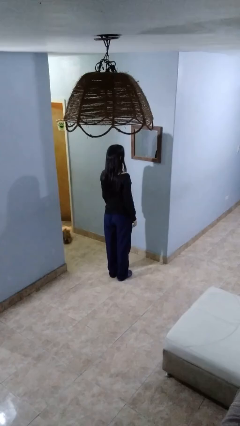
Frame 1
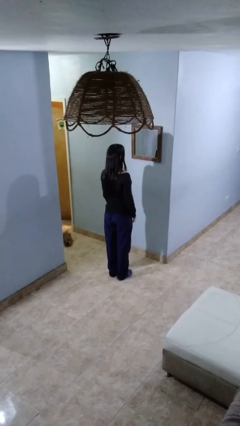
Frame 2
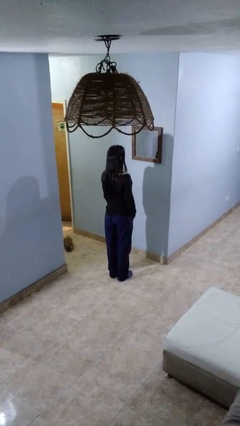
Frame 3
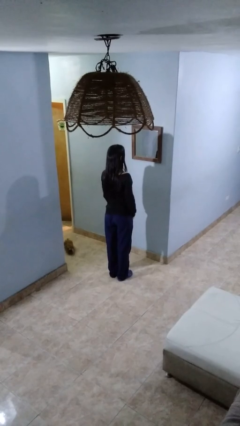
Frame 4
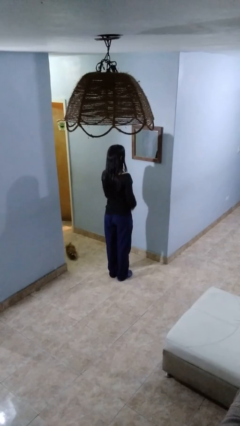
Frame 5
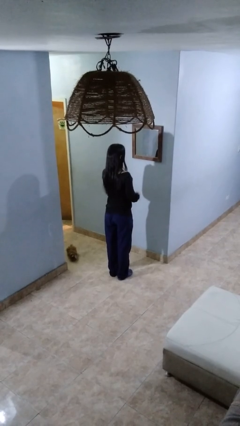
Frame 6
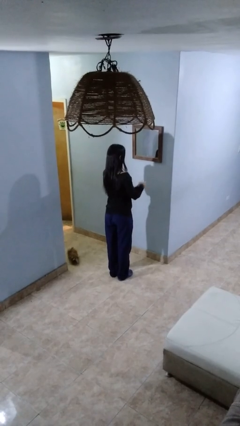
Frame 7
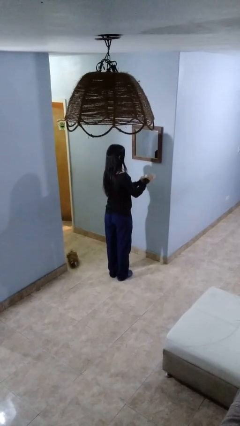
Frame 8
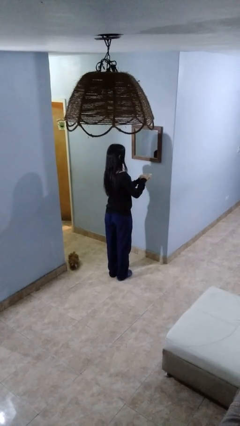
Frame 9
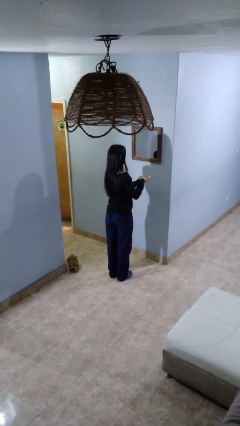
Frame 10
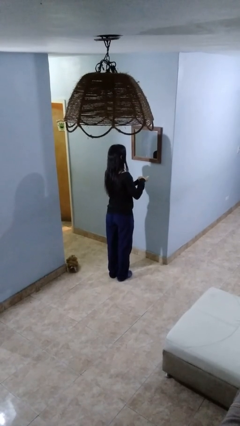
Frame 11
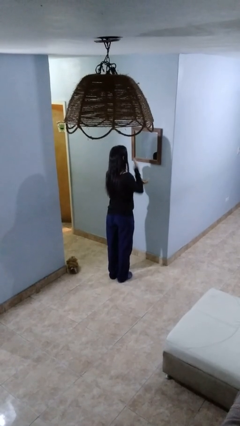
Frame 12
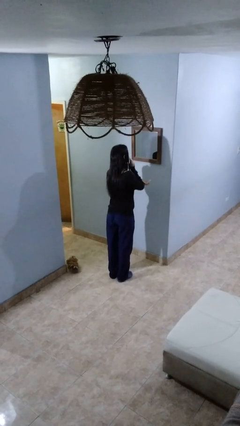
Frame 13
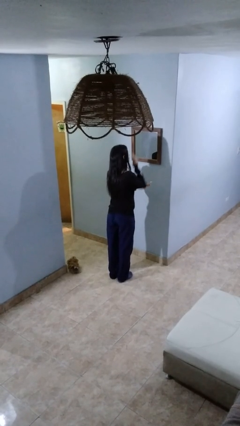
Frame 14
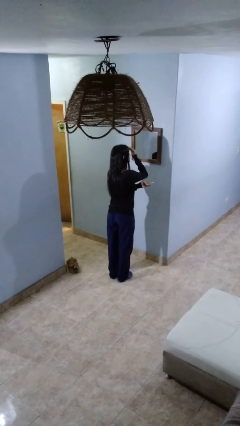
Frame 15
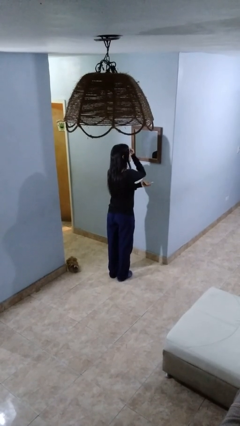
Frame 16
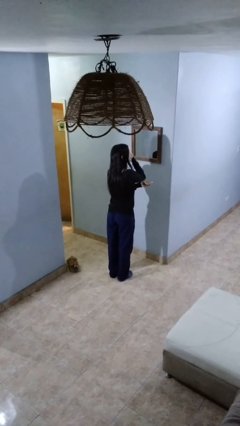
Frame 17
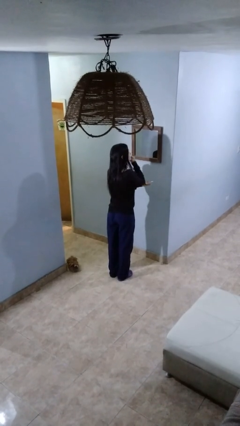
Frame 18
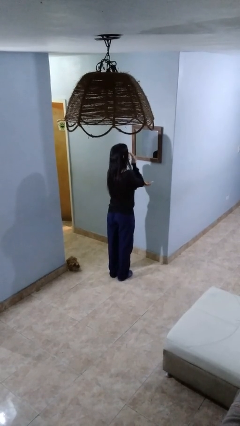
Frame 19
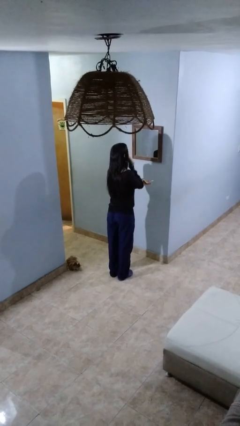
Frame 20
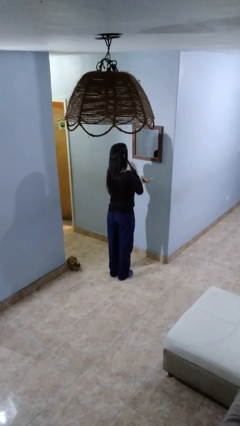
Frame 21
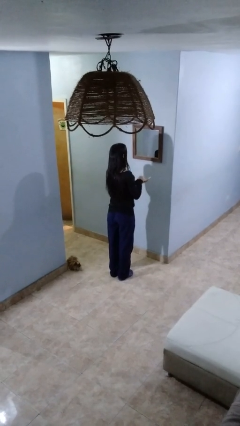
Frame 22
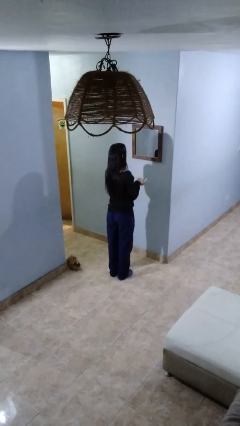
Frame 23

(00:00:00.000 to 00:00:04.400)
person applies foundation makeup

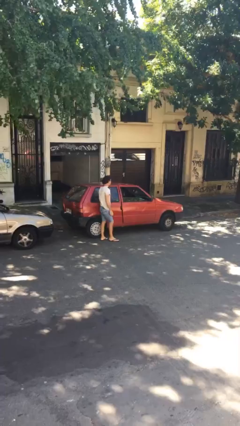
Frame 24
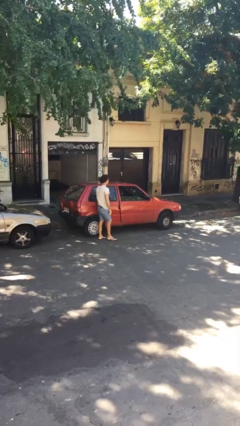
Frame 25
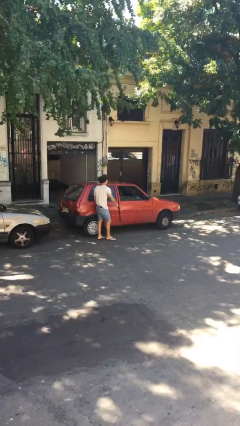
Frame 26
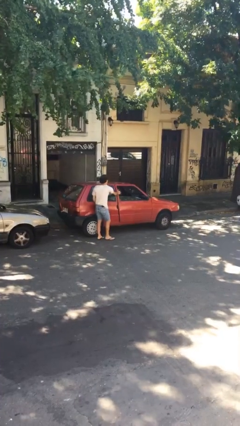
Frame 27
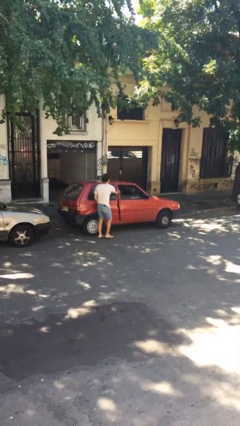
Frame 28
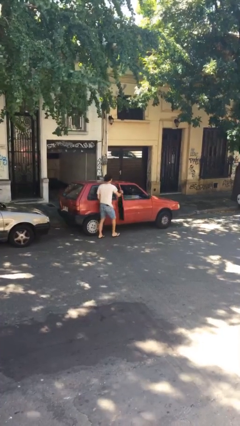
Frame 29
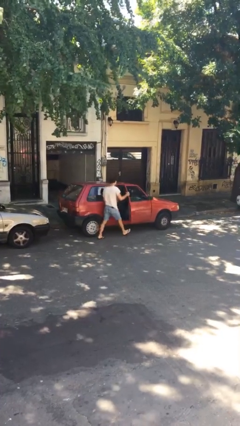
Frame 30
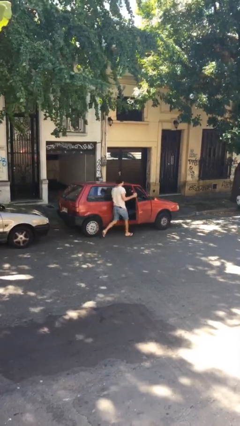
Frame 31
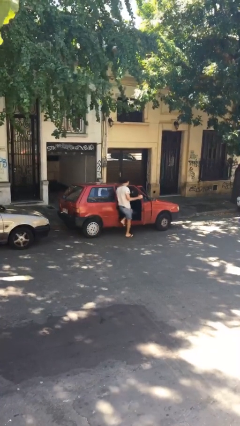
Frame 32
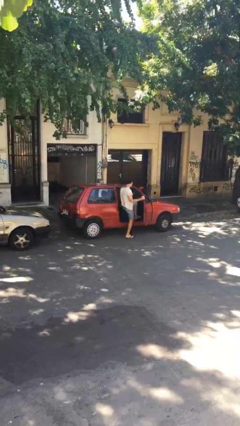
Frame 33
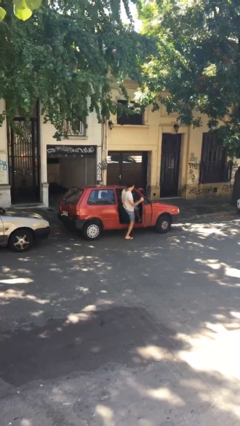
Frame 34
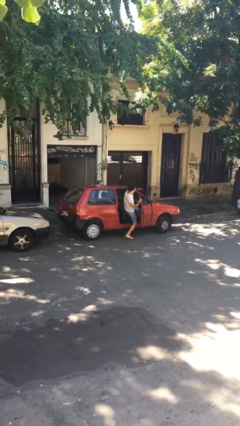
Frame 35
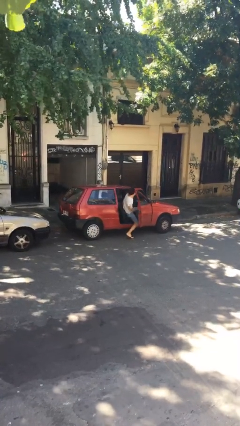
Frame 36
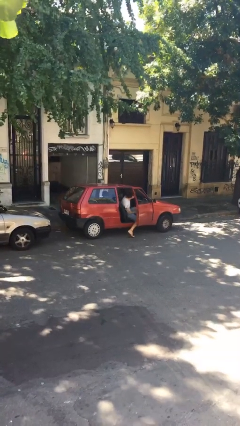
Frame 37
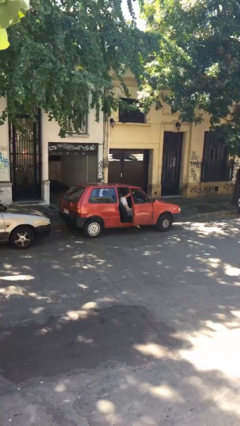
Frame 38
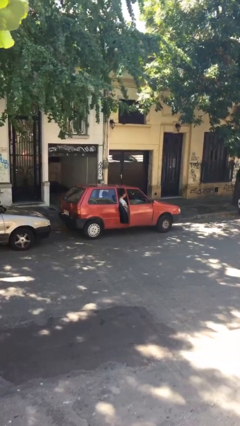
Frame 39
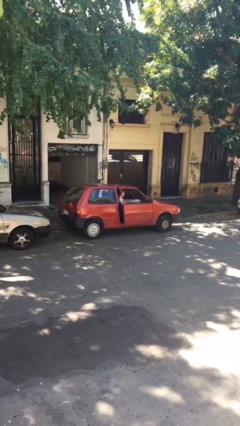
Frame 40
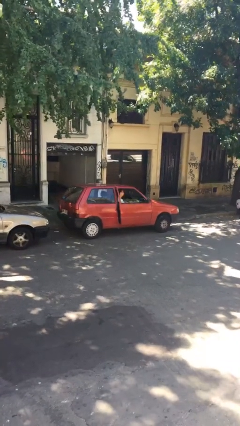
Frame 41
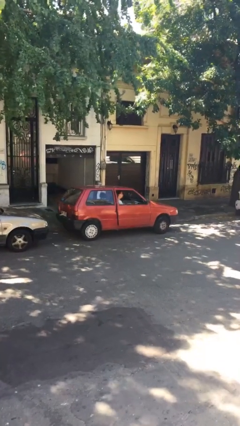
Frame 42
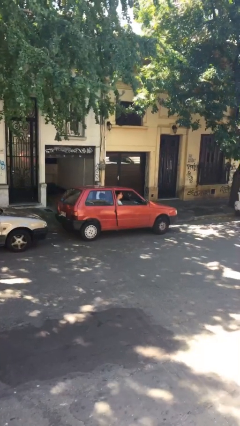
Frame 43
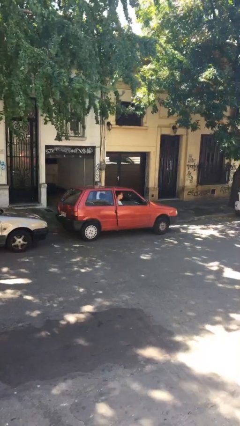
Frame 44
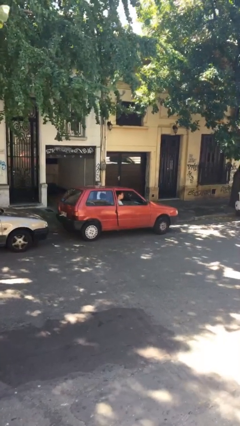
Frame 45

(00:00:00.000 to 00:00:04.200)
car picks up person

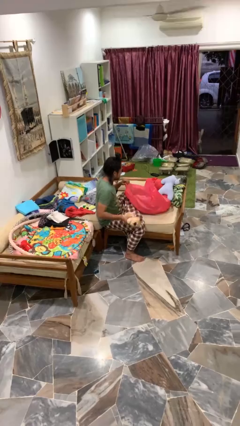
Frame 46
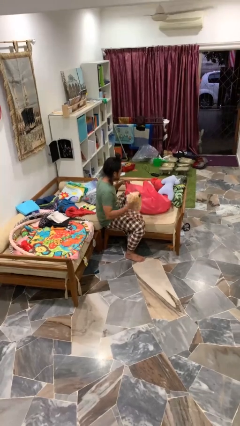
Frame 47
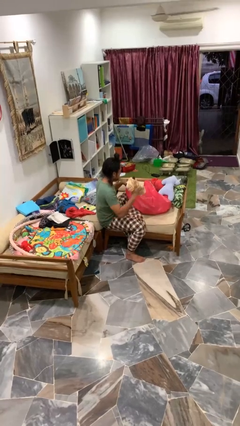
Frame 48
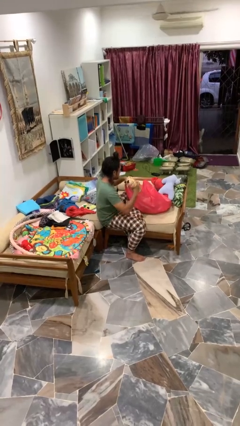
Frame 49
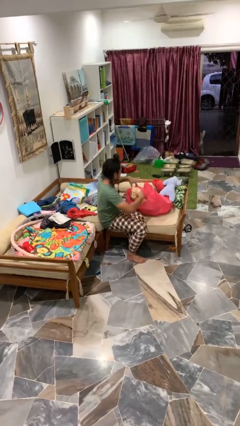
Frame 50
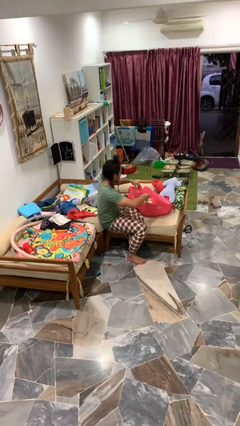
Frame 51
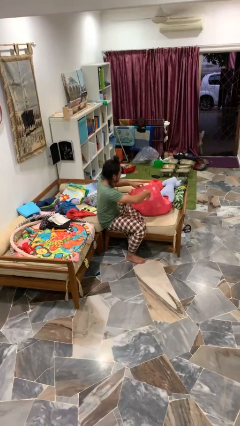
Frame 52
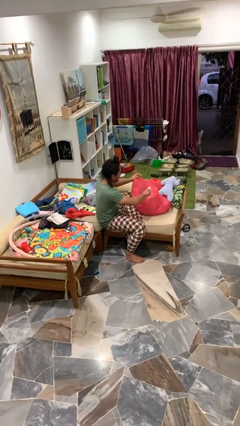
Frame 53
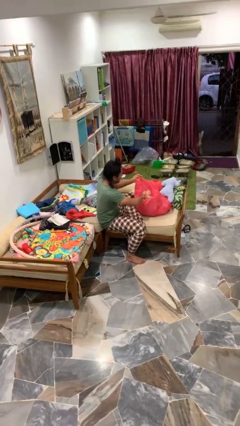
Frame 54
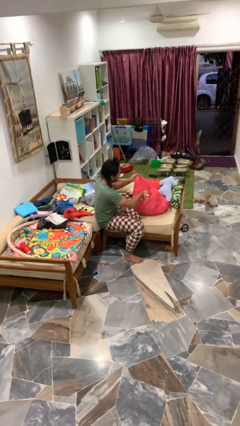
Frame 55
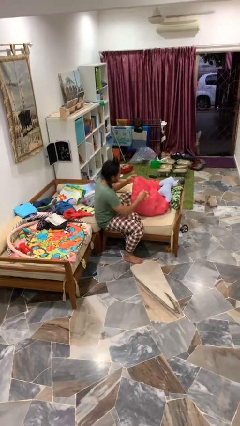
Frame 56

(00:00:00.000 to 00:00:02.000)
person puts object into bag

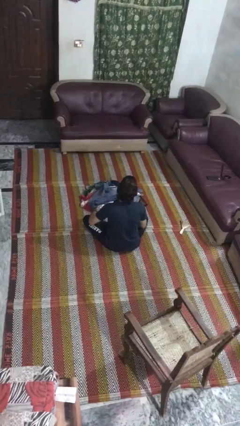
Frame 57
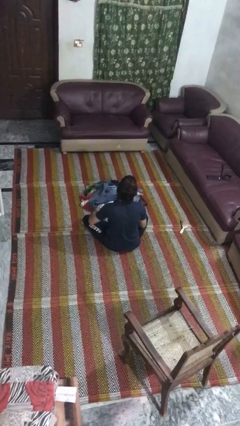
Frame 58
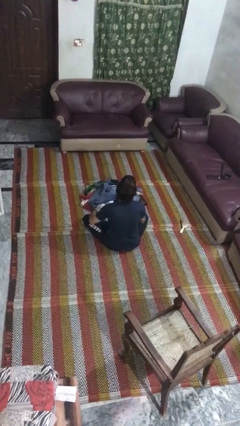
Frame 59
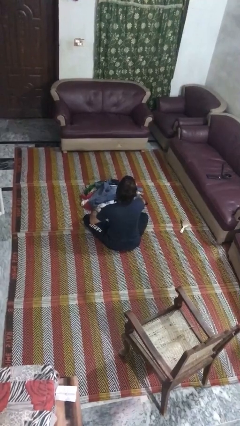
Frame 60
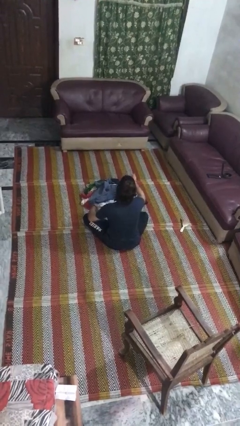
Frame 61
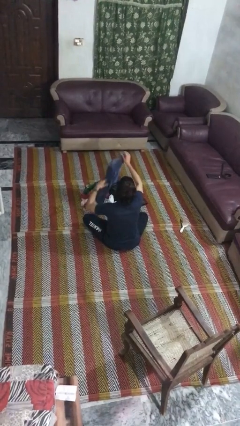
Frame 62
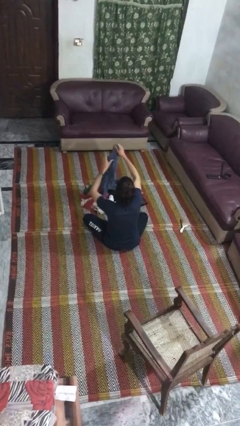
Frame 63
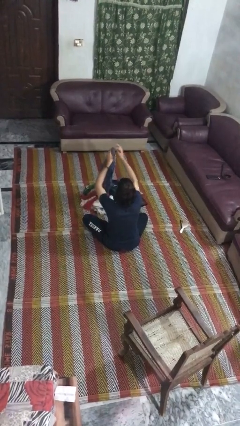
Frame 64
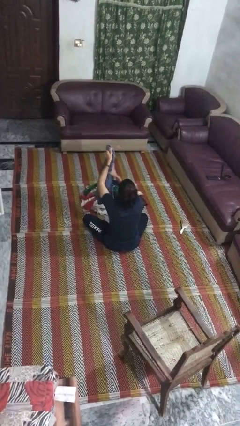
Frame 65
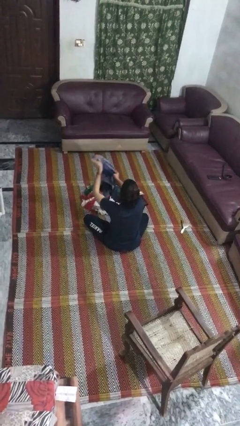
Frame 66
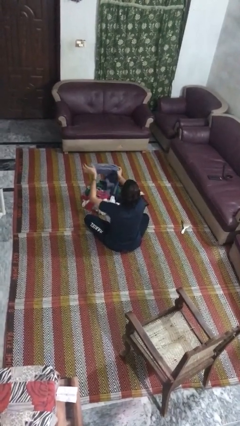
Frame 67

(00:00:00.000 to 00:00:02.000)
person folds shirt

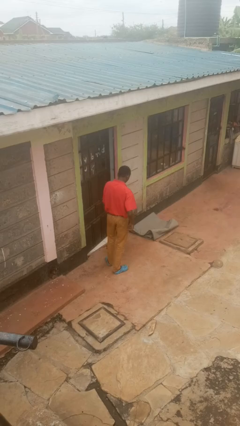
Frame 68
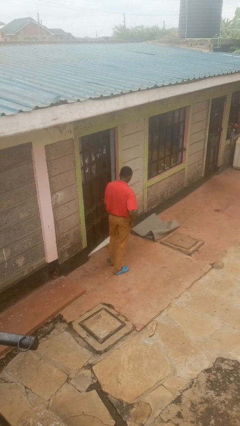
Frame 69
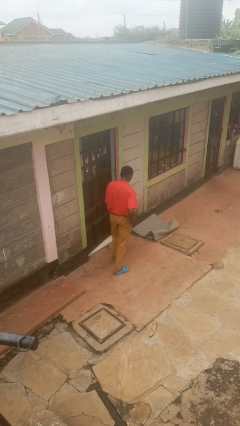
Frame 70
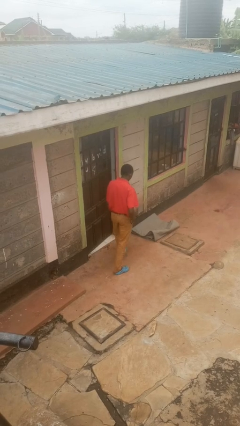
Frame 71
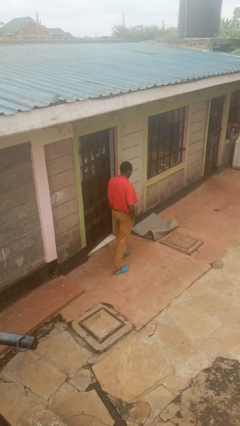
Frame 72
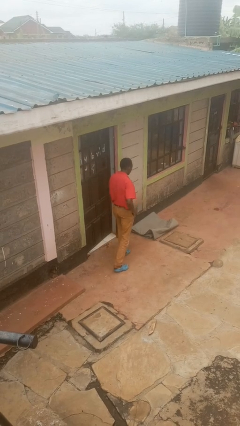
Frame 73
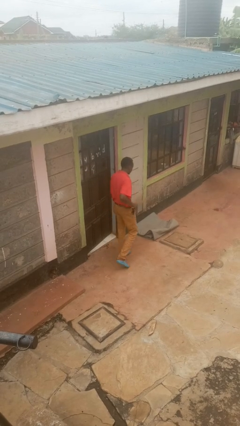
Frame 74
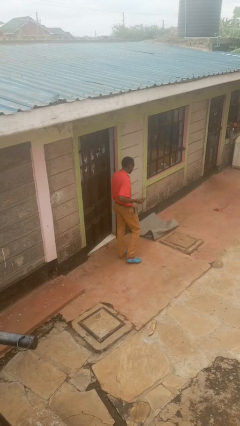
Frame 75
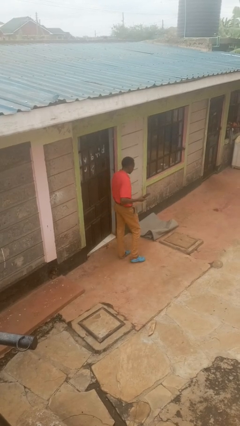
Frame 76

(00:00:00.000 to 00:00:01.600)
person takes phone from pocket

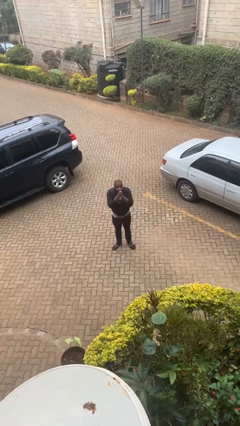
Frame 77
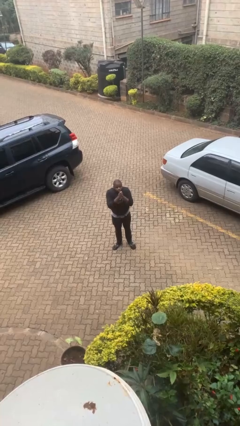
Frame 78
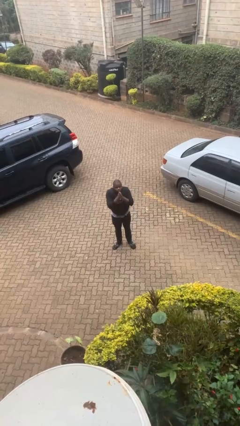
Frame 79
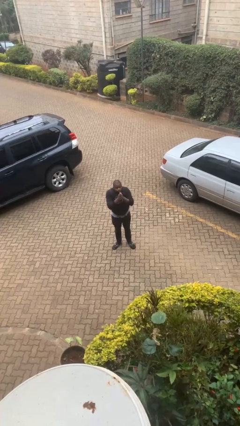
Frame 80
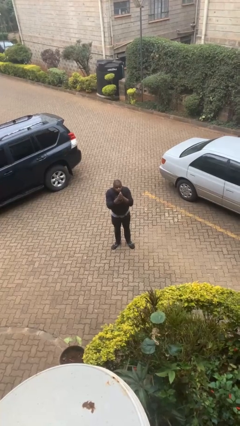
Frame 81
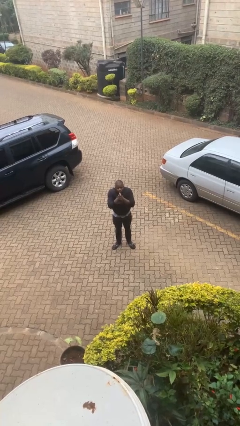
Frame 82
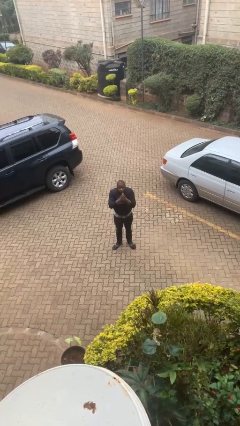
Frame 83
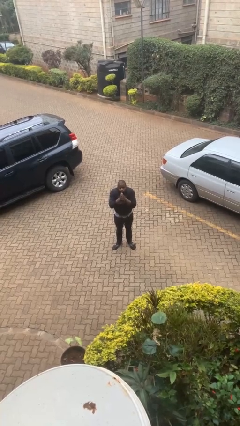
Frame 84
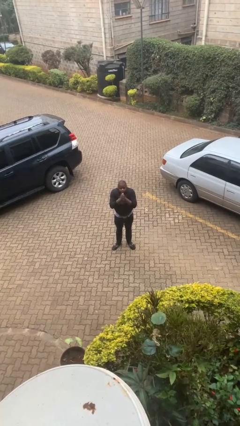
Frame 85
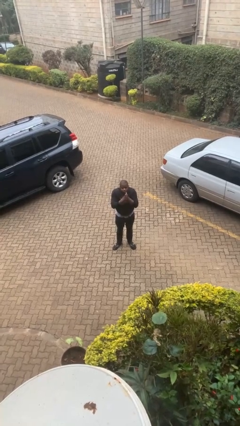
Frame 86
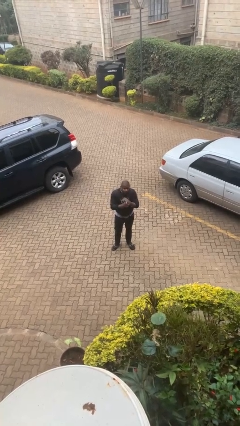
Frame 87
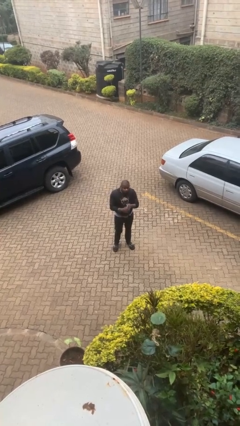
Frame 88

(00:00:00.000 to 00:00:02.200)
person blows into hands

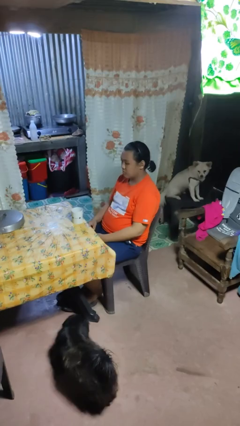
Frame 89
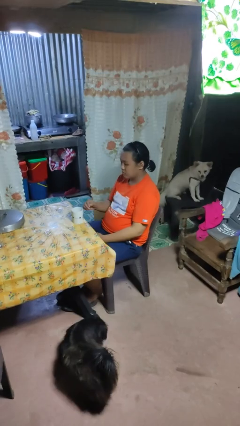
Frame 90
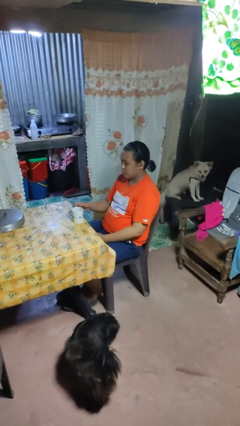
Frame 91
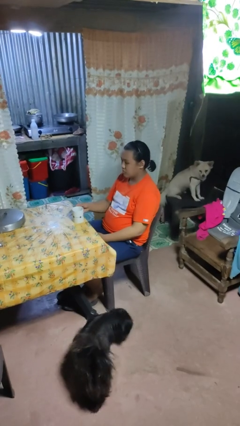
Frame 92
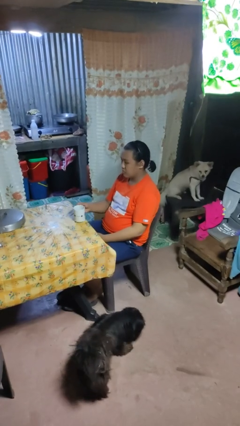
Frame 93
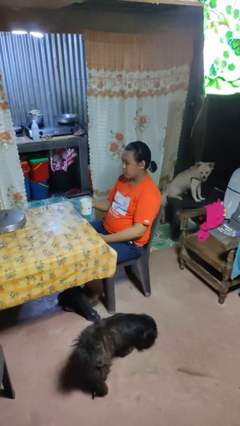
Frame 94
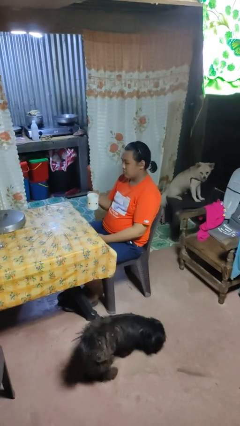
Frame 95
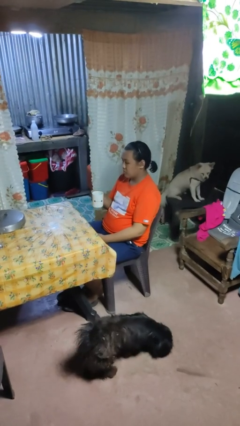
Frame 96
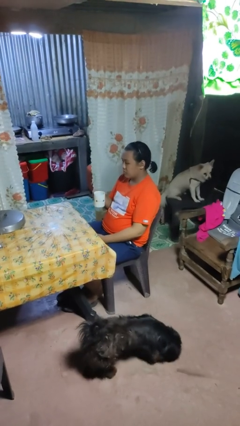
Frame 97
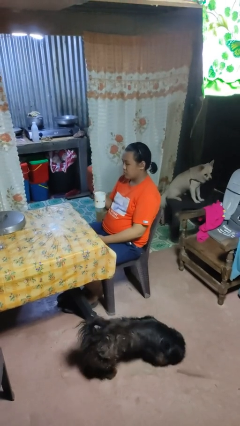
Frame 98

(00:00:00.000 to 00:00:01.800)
person picks up object from table
